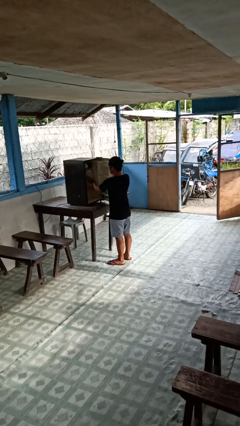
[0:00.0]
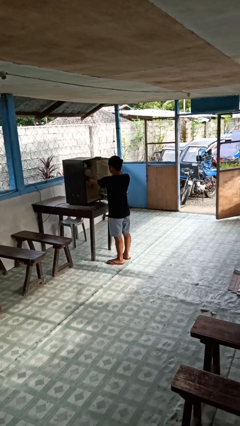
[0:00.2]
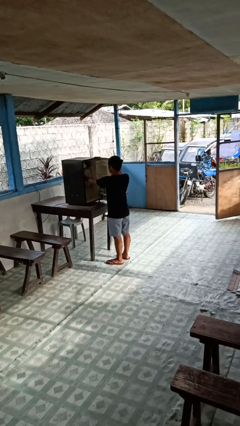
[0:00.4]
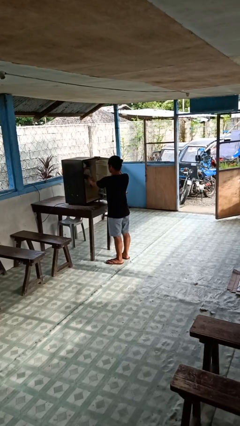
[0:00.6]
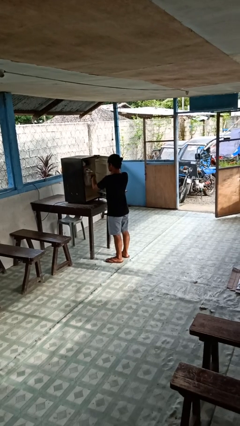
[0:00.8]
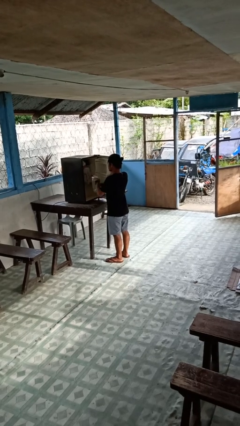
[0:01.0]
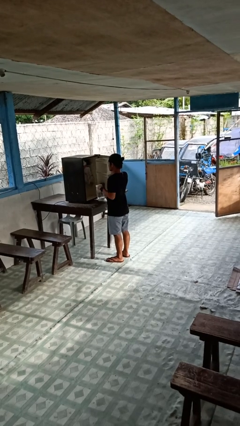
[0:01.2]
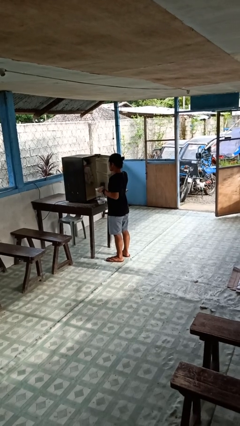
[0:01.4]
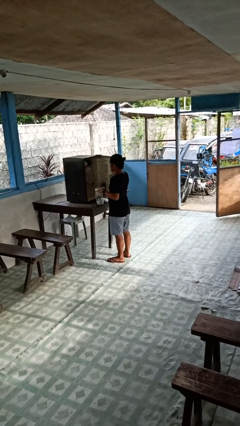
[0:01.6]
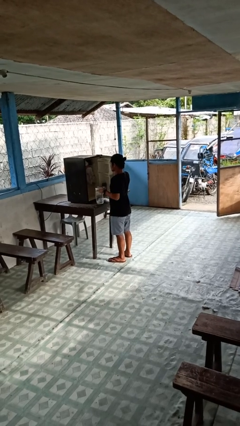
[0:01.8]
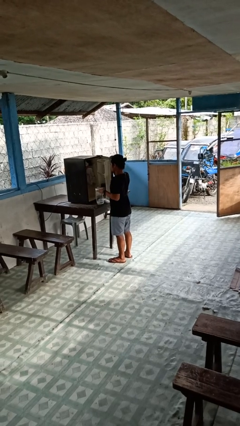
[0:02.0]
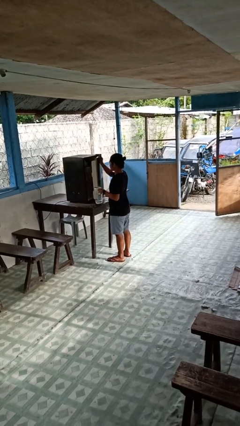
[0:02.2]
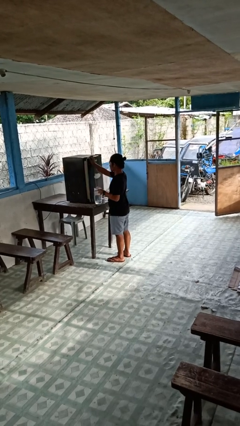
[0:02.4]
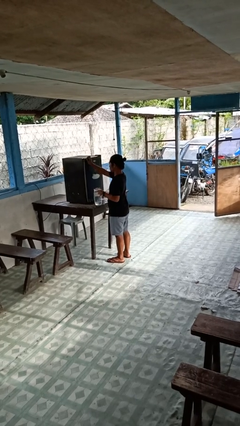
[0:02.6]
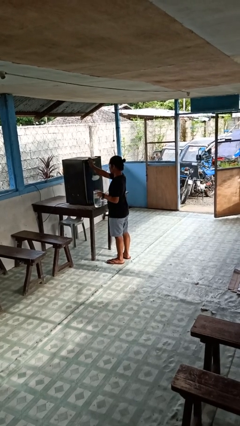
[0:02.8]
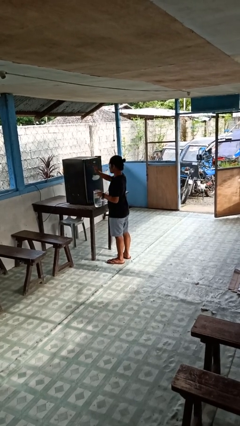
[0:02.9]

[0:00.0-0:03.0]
person takes object from refrigerator

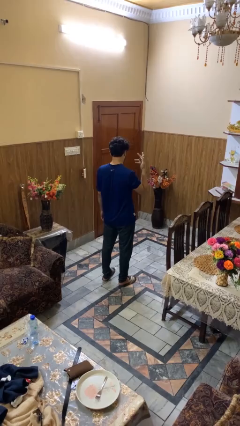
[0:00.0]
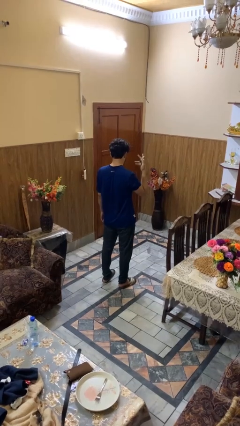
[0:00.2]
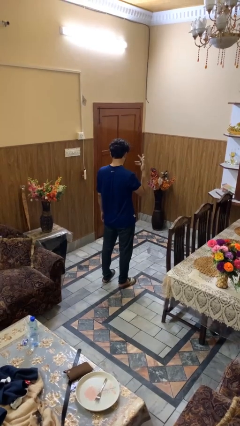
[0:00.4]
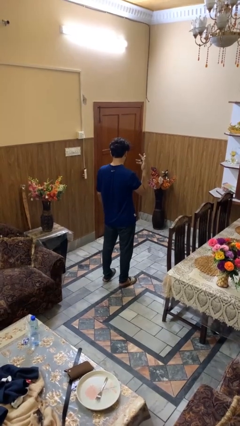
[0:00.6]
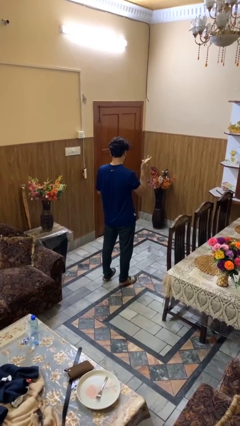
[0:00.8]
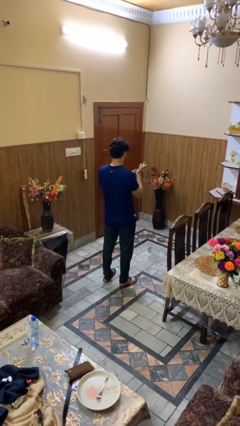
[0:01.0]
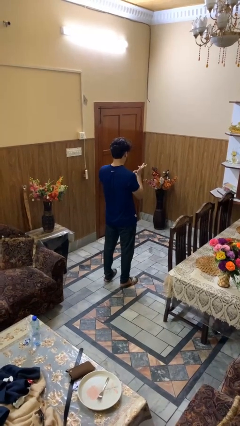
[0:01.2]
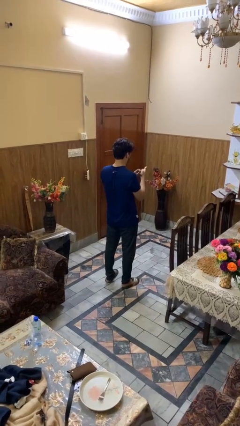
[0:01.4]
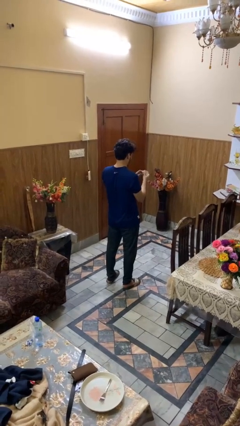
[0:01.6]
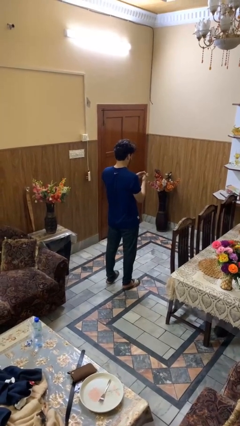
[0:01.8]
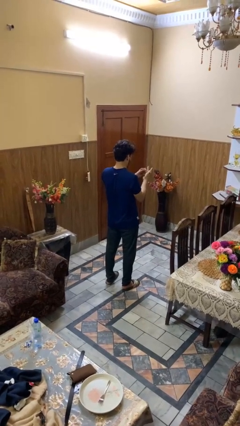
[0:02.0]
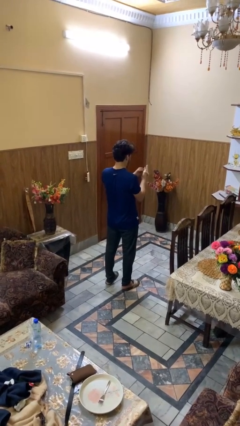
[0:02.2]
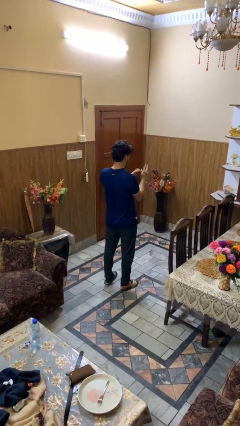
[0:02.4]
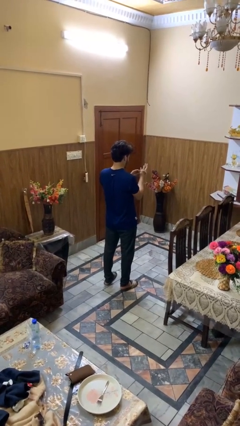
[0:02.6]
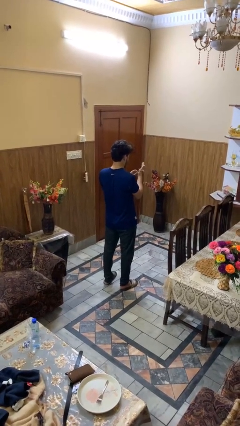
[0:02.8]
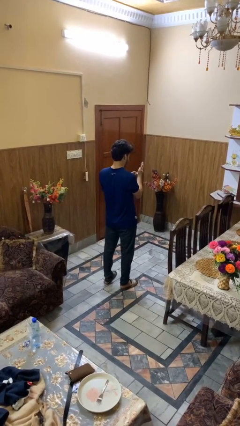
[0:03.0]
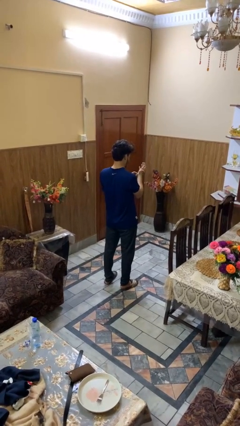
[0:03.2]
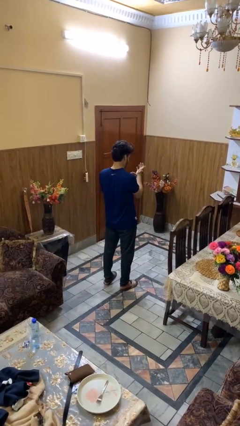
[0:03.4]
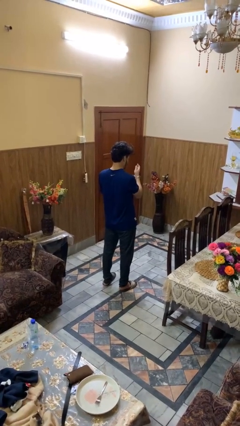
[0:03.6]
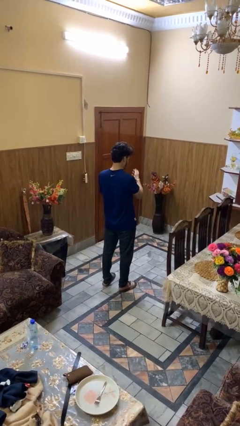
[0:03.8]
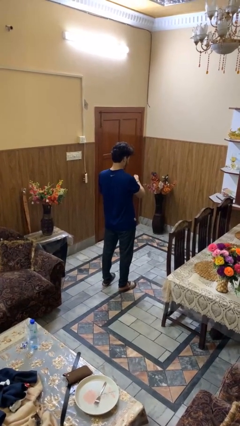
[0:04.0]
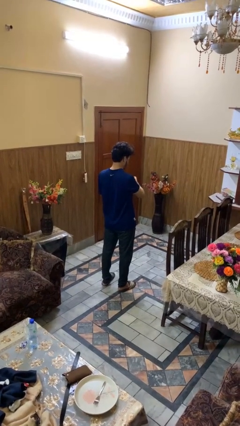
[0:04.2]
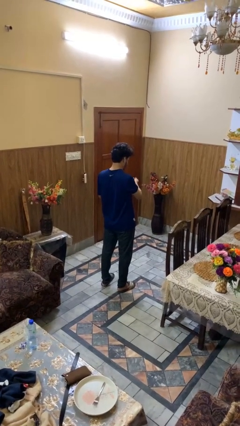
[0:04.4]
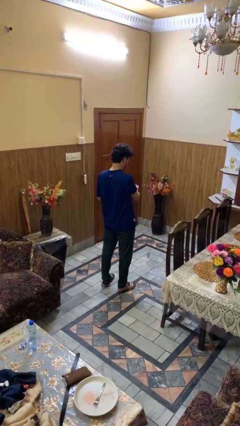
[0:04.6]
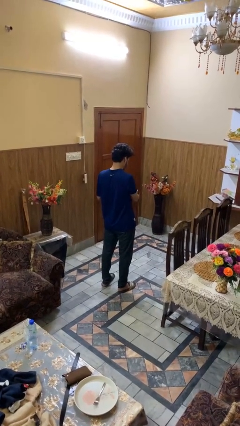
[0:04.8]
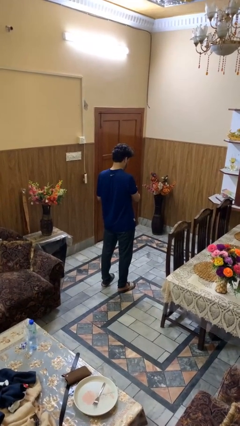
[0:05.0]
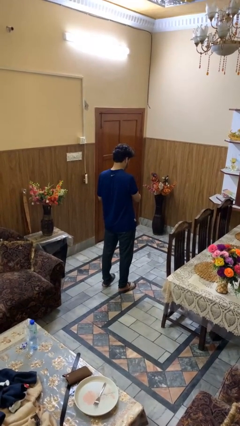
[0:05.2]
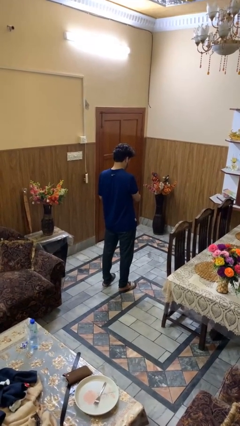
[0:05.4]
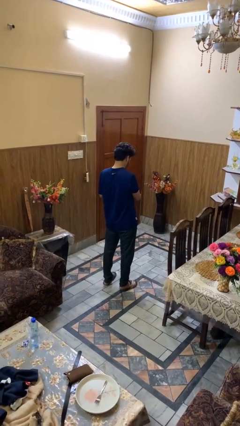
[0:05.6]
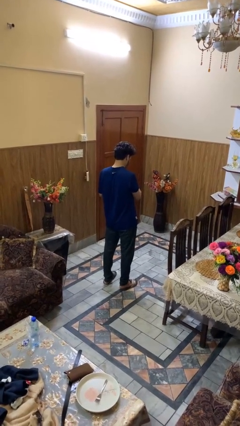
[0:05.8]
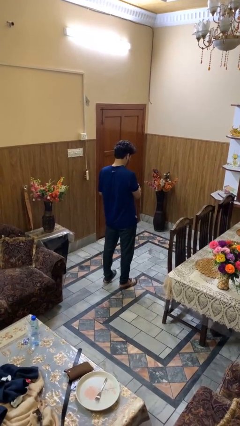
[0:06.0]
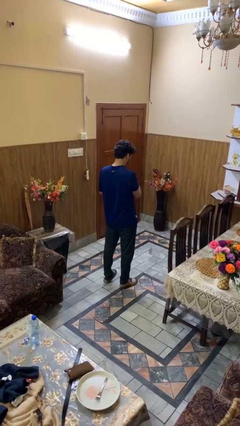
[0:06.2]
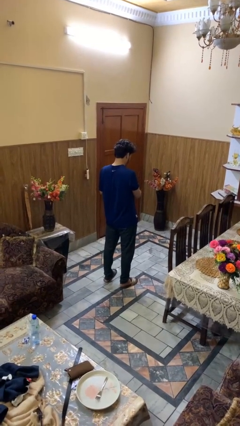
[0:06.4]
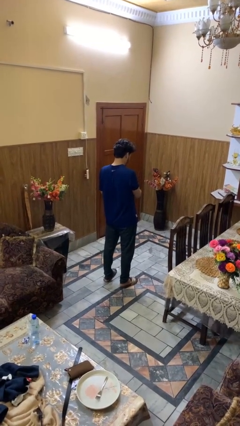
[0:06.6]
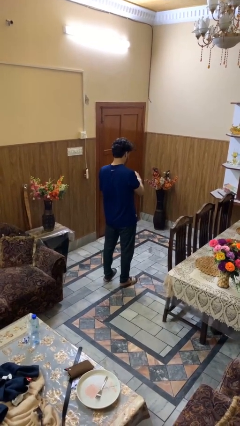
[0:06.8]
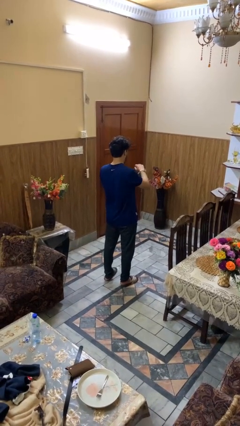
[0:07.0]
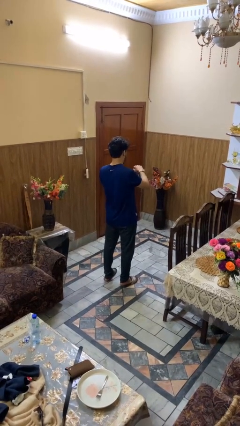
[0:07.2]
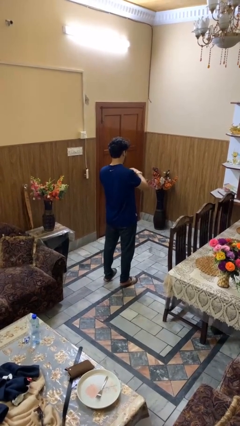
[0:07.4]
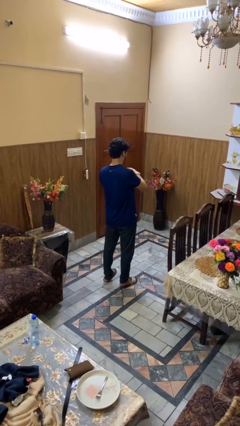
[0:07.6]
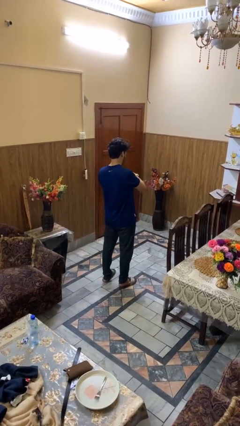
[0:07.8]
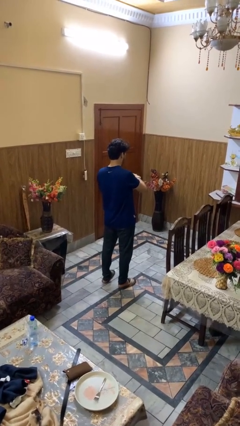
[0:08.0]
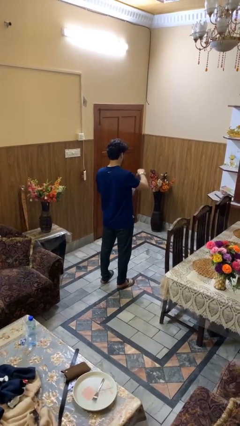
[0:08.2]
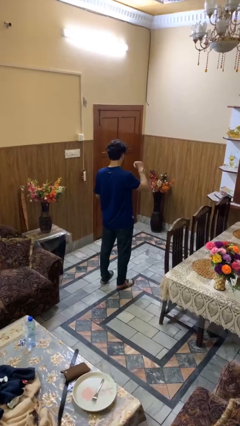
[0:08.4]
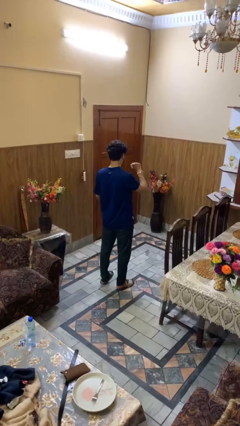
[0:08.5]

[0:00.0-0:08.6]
person puts on wristwatch

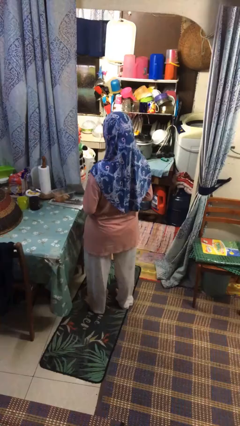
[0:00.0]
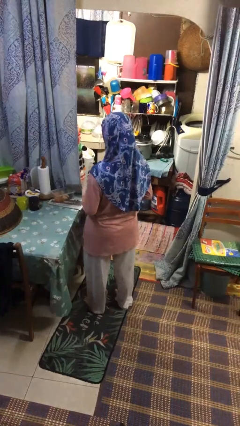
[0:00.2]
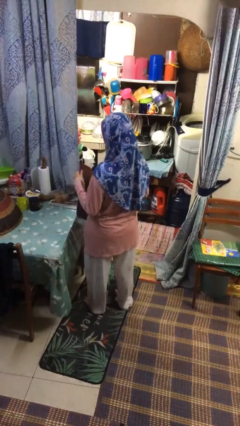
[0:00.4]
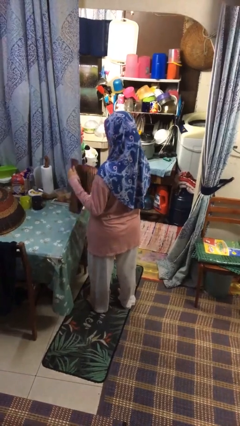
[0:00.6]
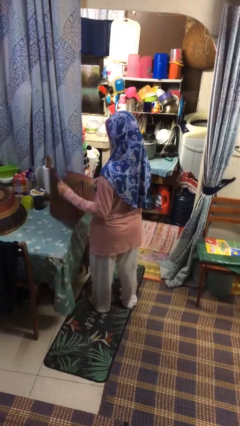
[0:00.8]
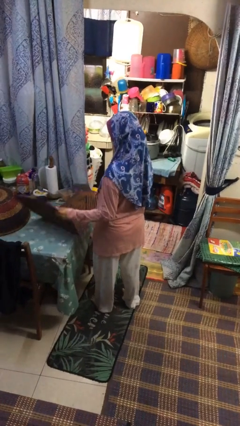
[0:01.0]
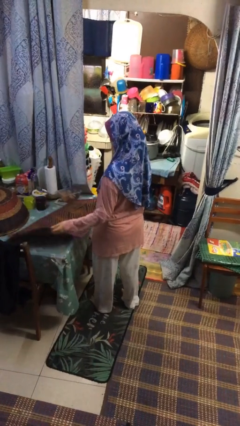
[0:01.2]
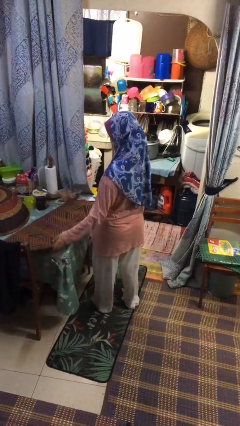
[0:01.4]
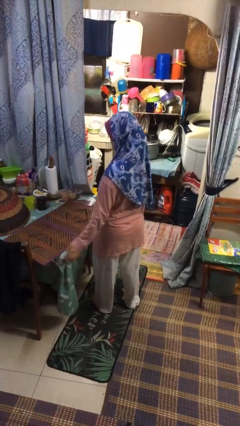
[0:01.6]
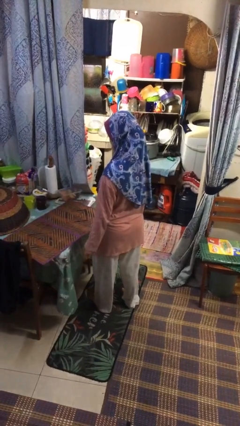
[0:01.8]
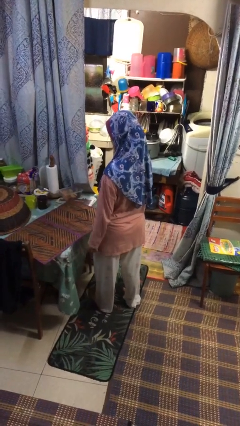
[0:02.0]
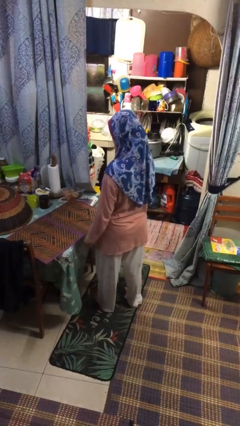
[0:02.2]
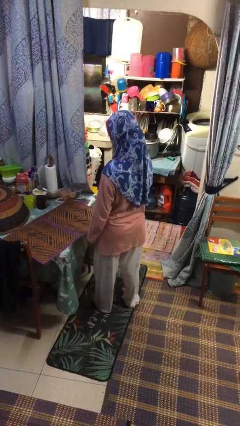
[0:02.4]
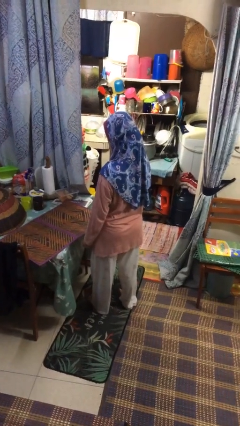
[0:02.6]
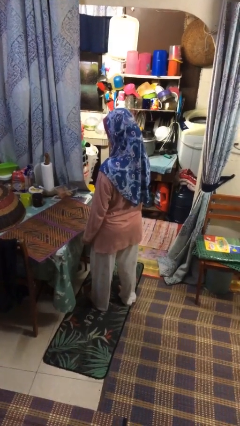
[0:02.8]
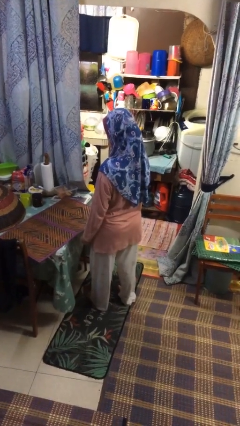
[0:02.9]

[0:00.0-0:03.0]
person spreads tablecloth

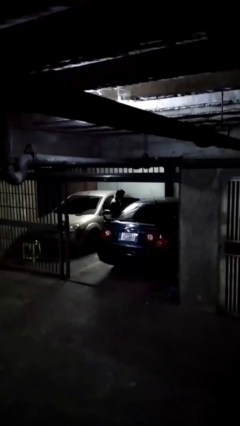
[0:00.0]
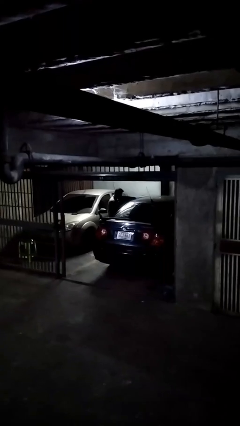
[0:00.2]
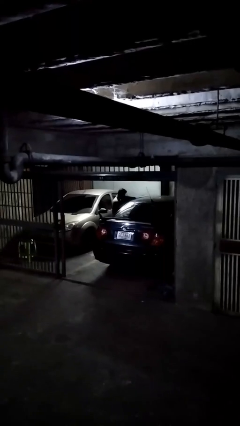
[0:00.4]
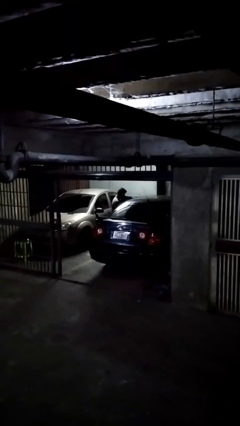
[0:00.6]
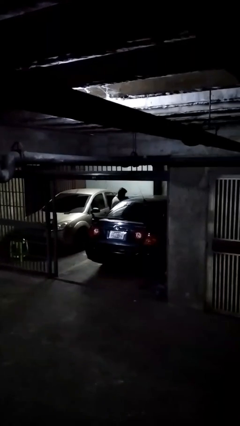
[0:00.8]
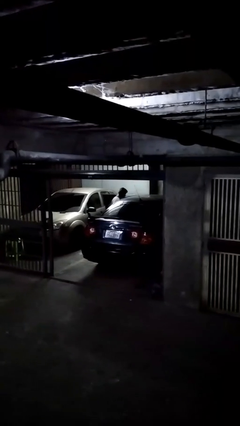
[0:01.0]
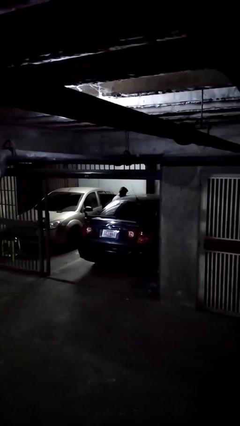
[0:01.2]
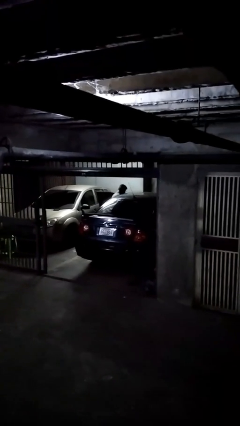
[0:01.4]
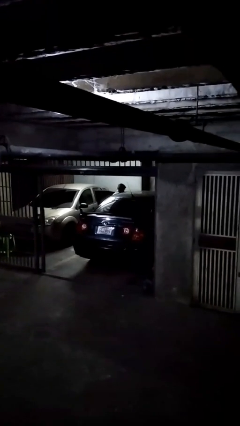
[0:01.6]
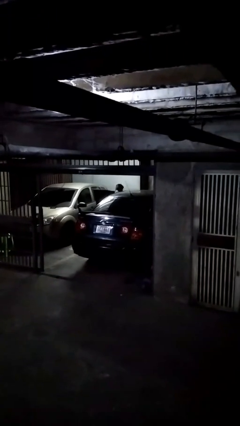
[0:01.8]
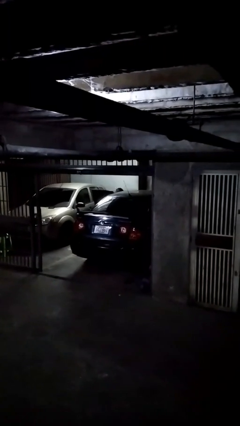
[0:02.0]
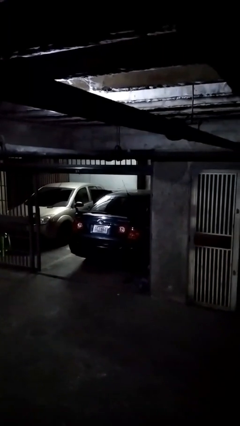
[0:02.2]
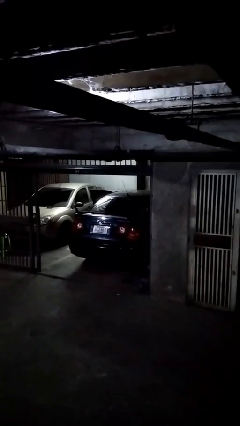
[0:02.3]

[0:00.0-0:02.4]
person enters car

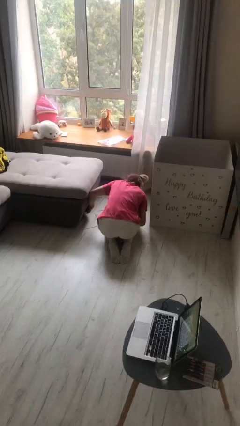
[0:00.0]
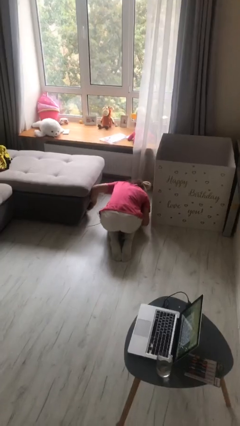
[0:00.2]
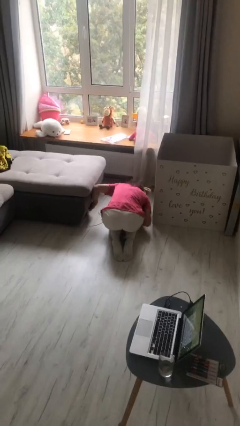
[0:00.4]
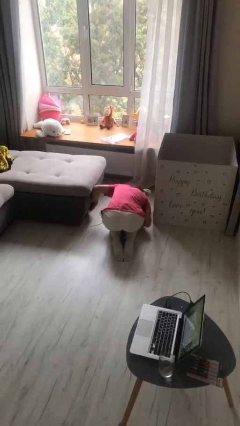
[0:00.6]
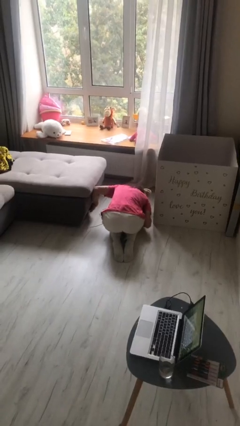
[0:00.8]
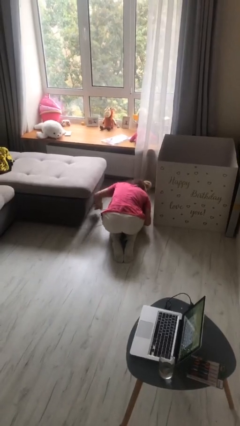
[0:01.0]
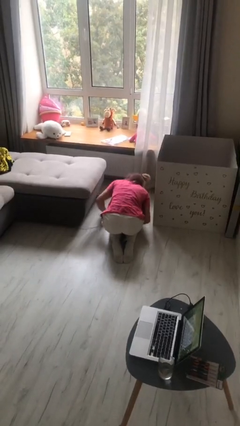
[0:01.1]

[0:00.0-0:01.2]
person searches under couch
